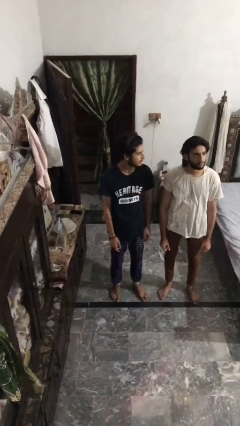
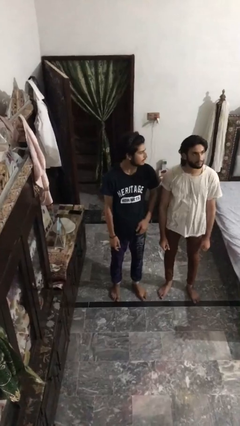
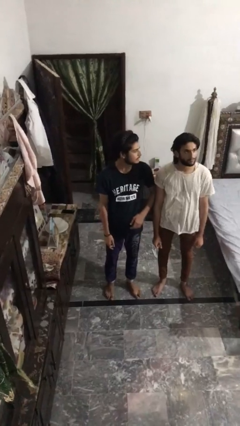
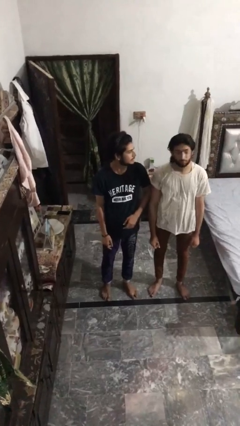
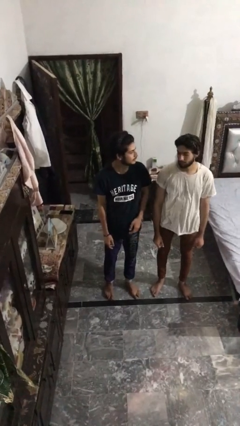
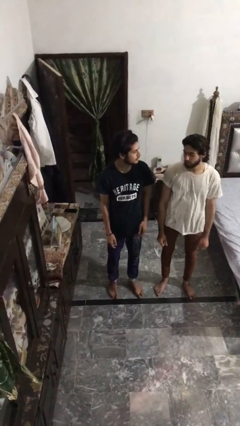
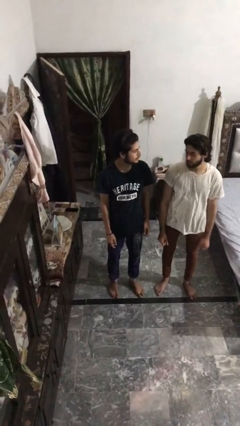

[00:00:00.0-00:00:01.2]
person nudges person with elbow

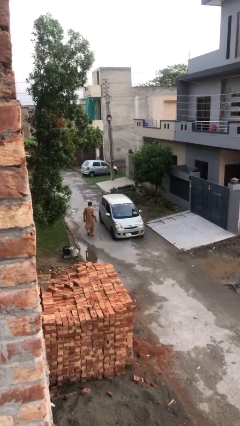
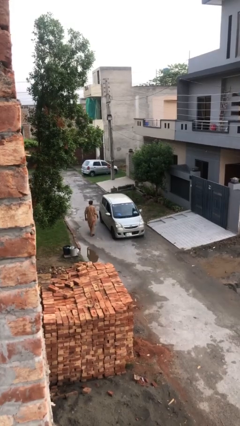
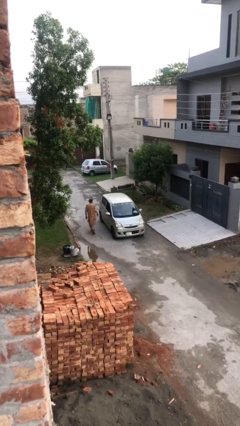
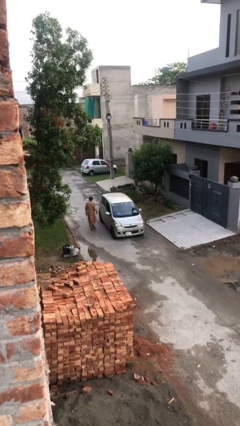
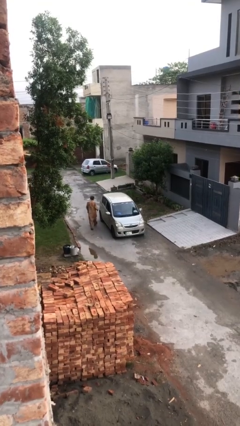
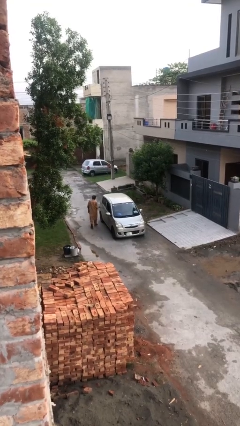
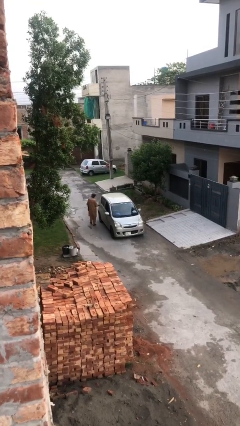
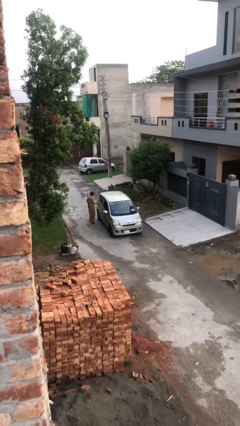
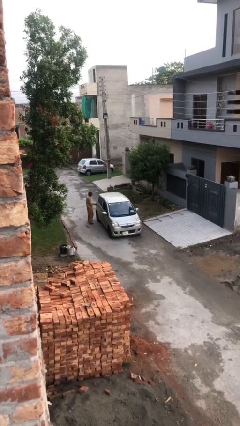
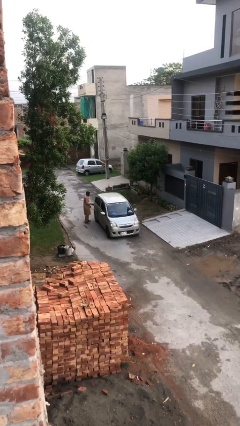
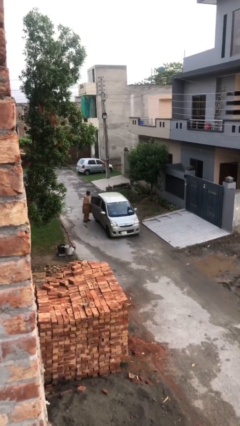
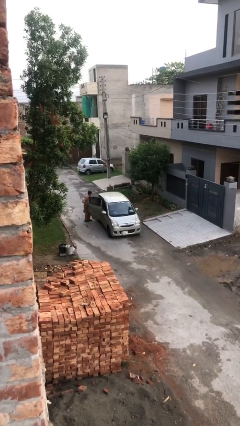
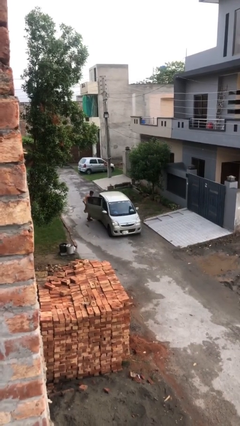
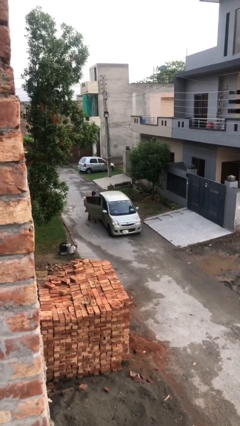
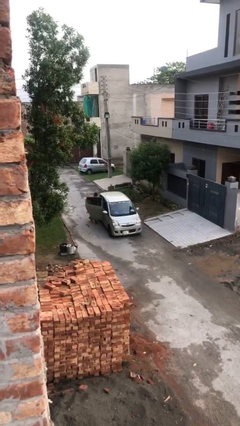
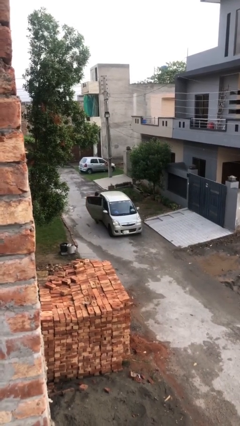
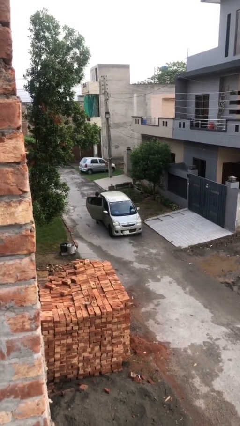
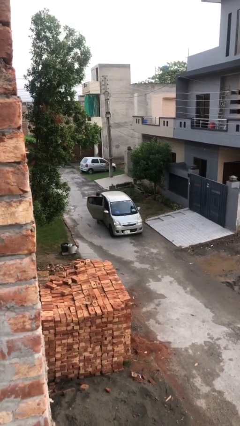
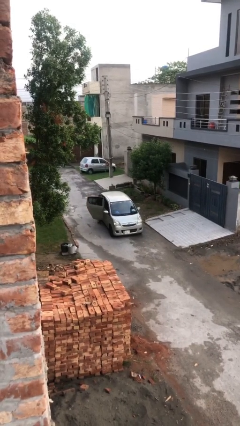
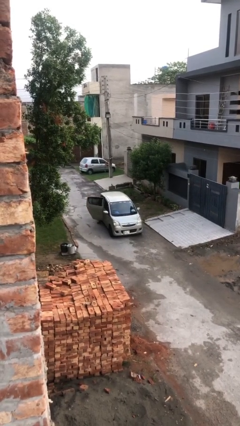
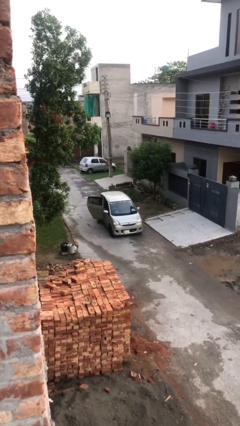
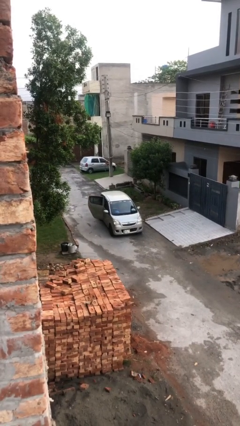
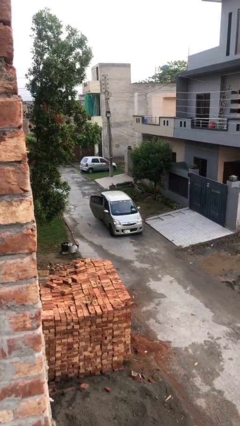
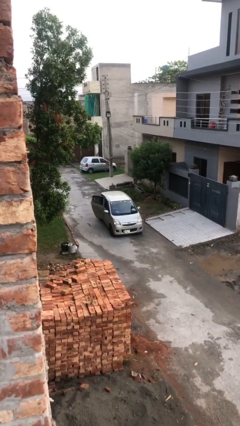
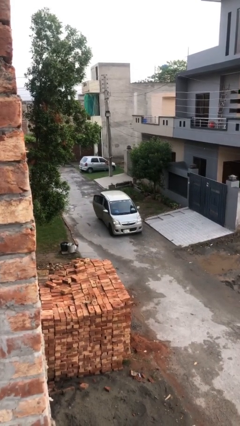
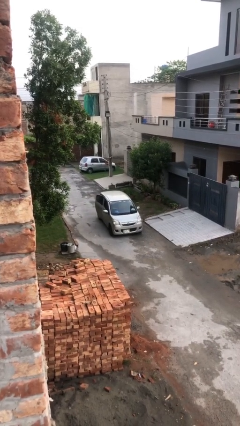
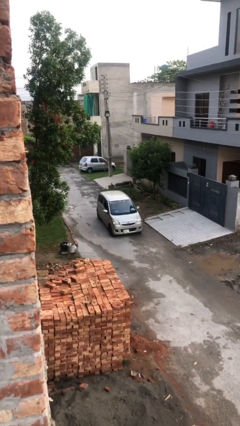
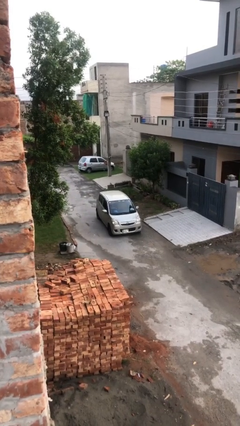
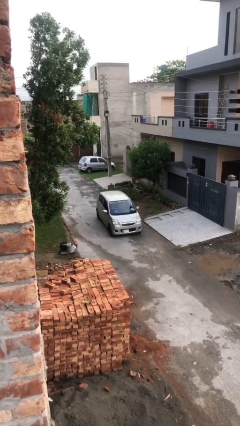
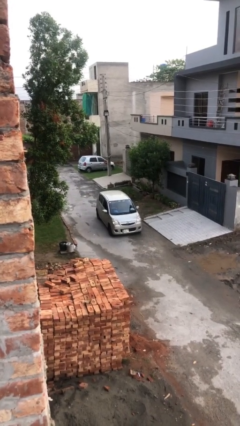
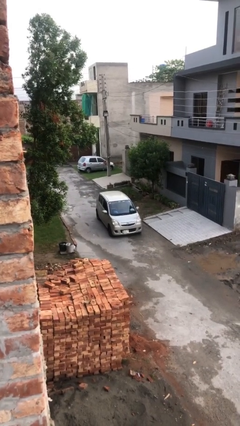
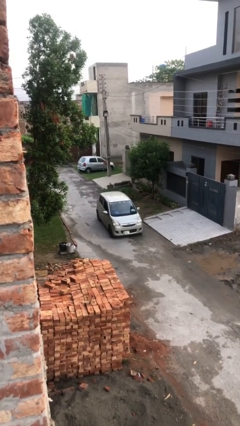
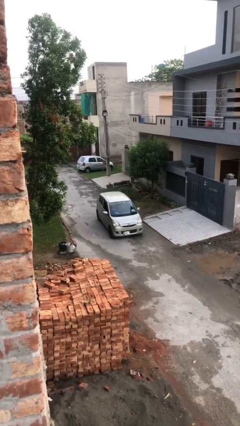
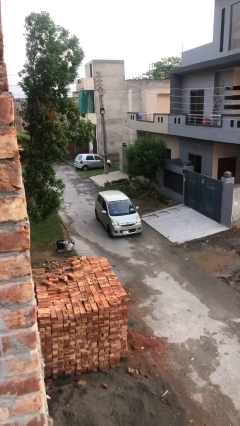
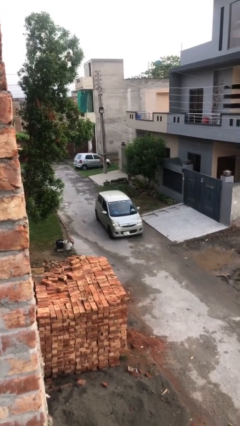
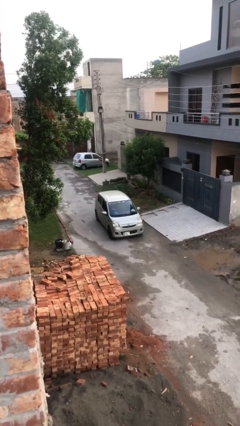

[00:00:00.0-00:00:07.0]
car picks up person

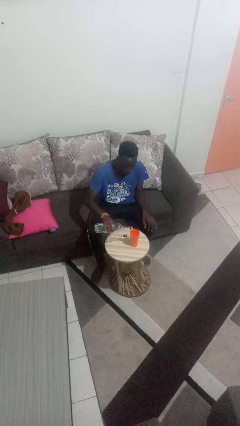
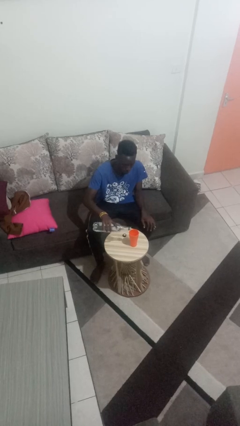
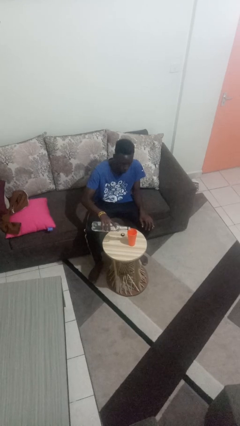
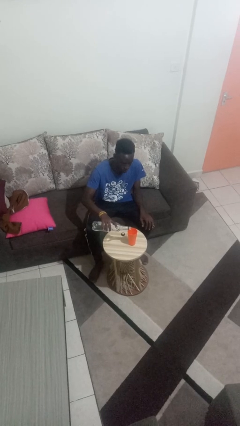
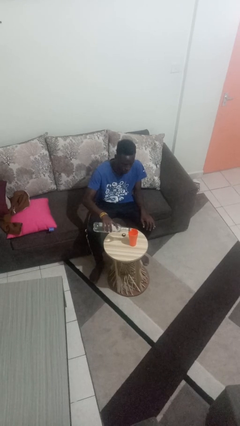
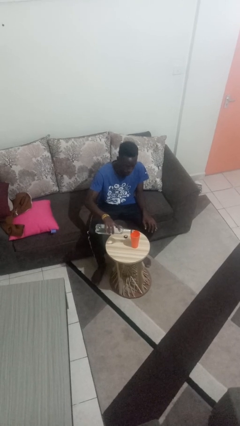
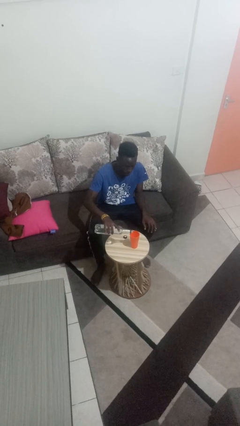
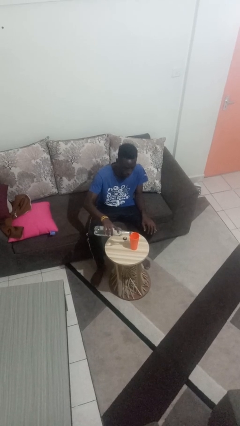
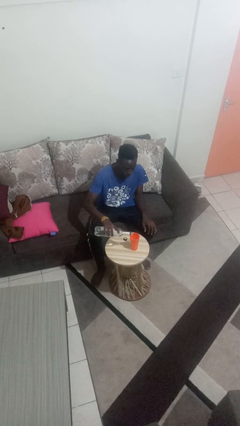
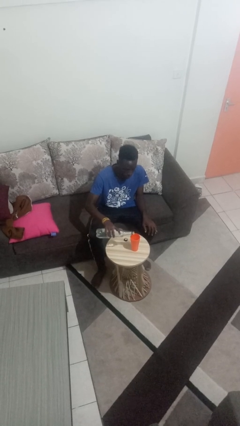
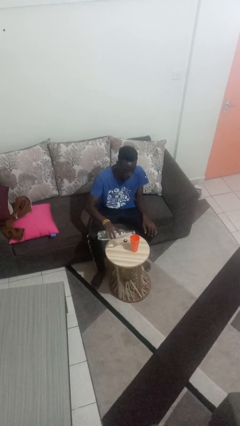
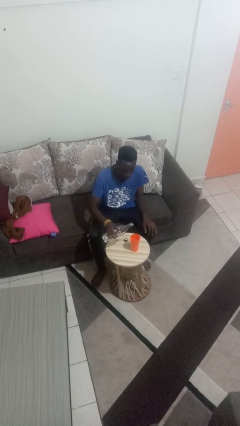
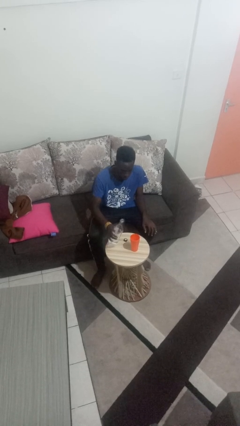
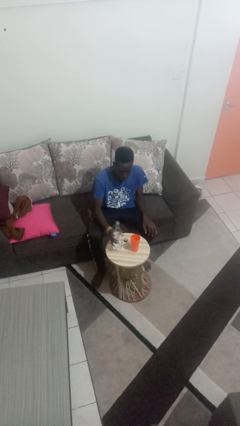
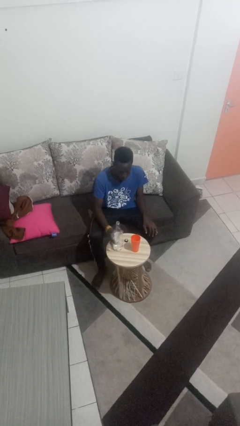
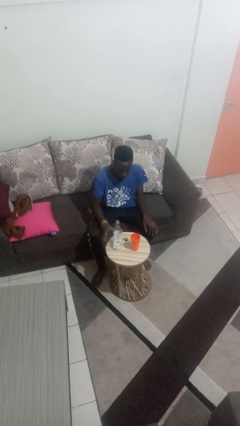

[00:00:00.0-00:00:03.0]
person pours liquid into cup

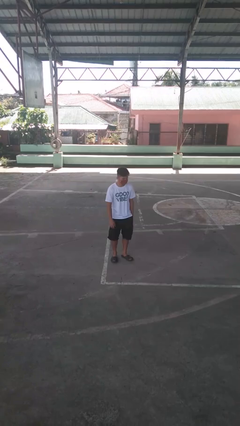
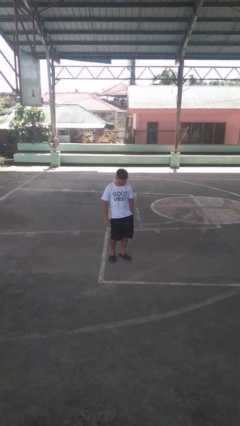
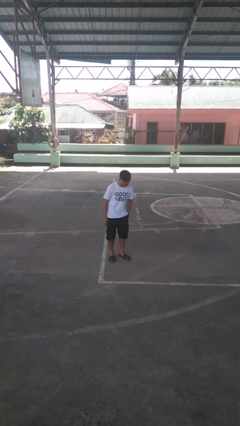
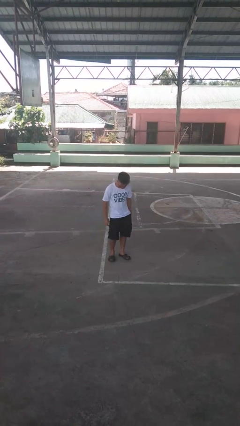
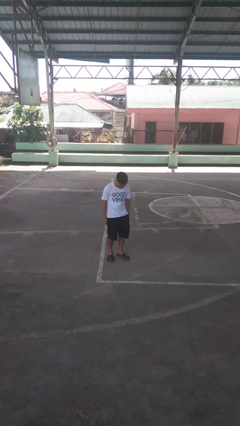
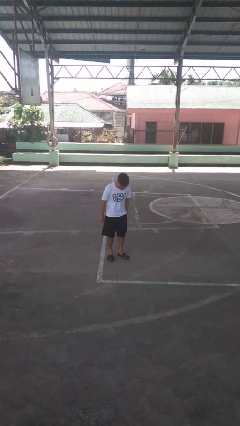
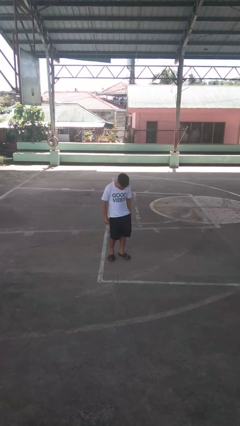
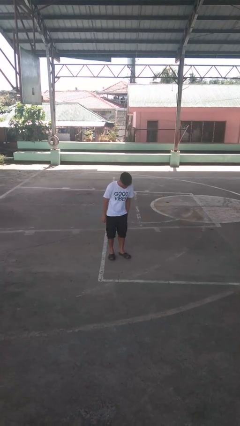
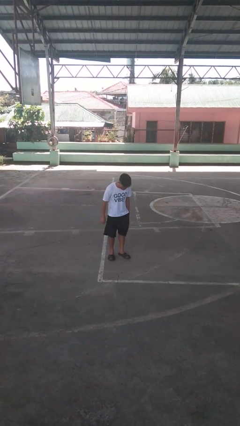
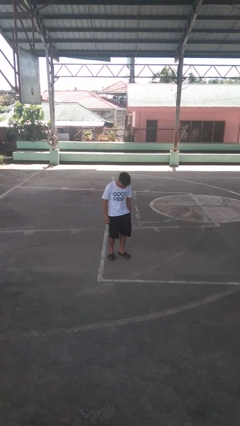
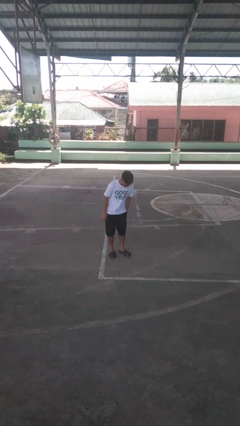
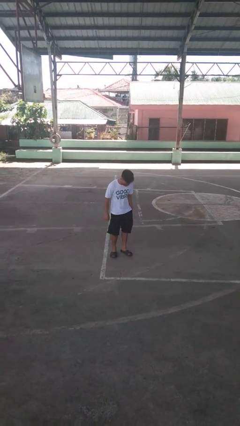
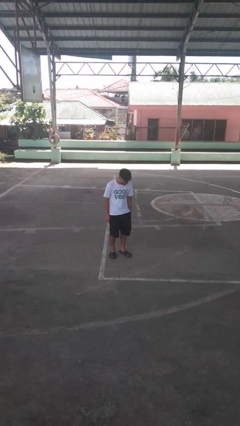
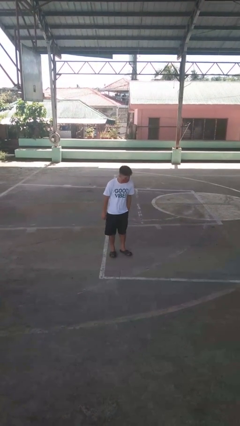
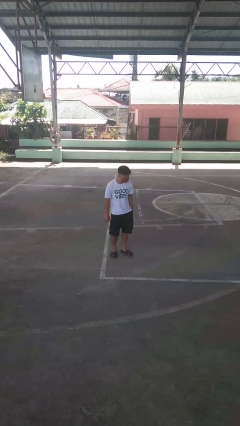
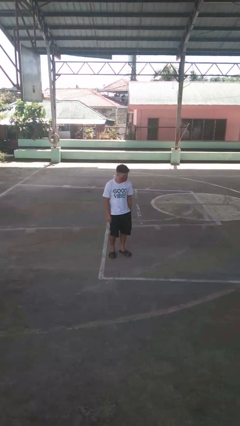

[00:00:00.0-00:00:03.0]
person wiggles hips

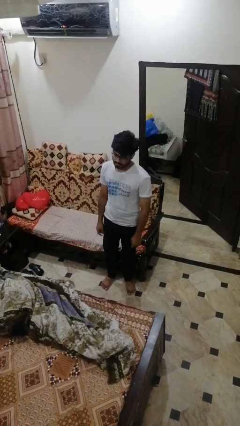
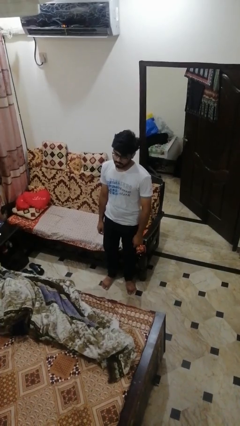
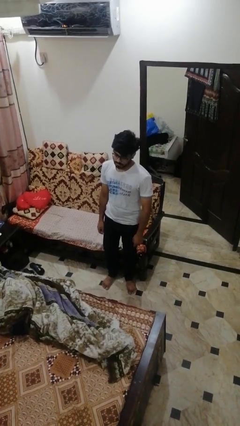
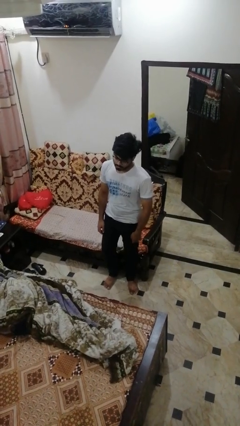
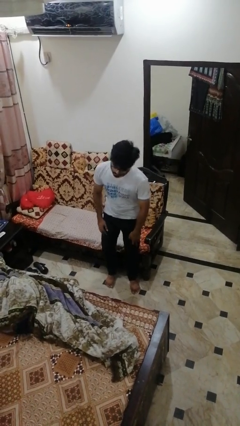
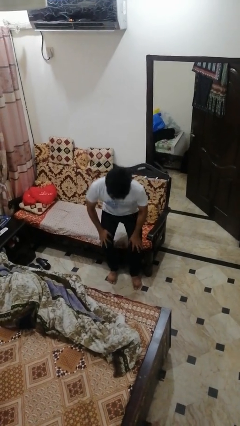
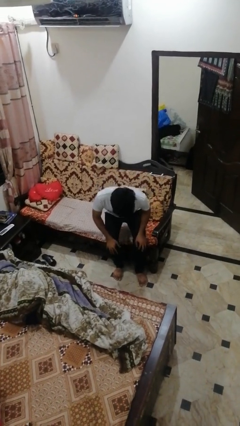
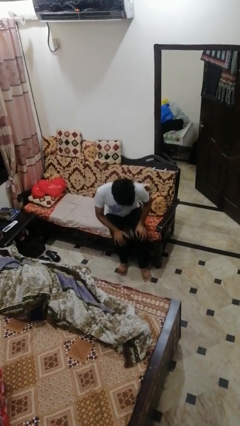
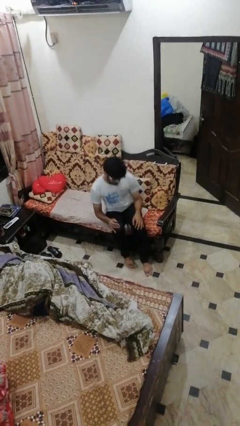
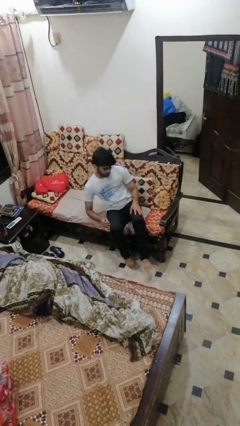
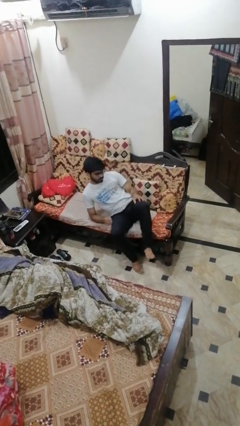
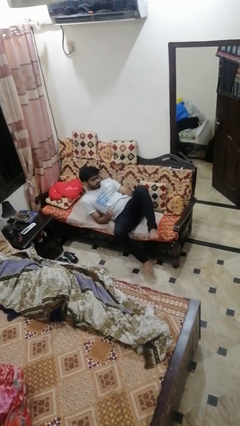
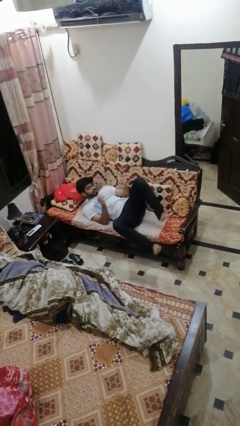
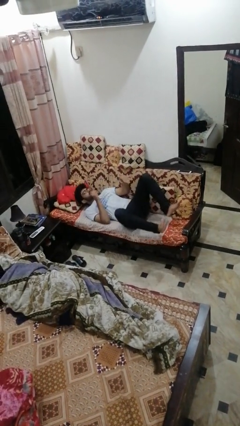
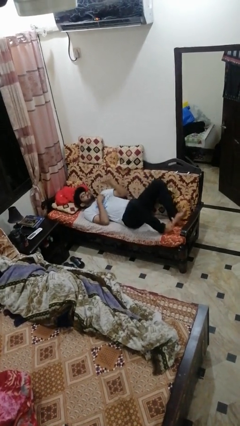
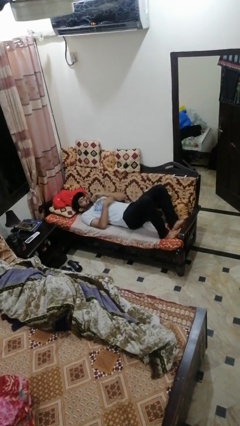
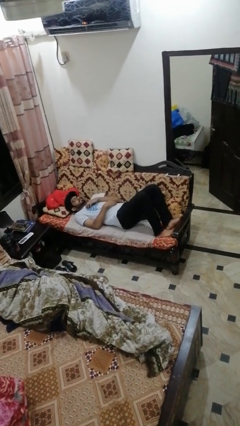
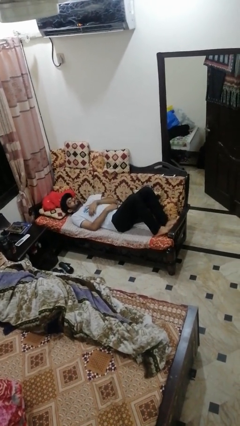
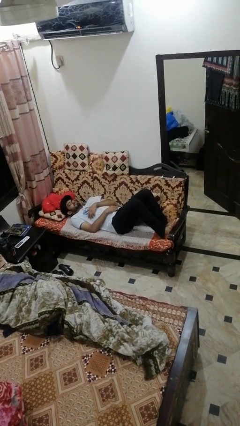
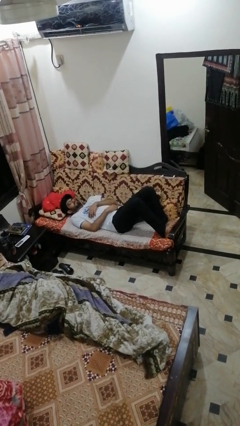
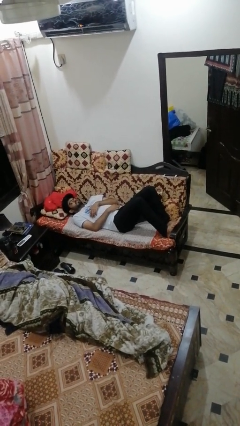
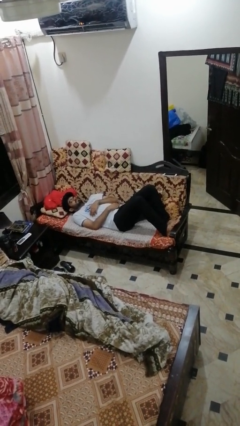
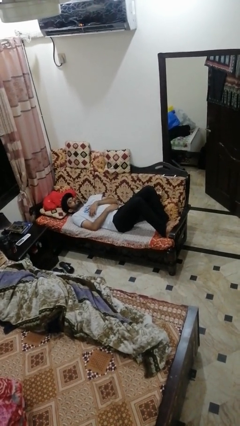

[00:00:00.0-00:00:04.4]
person lies down on couch
